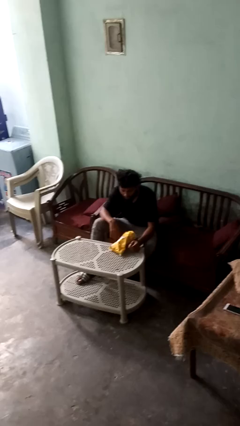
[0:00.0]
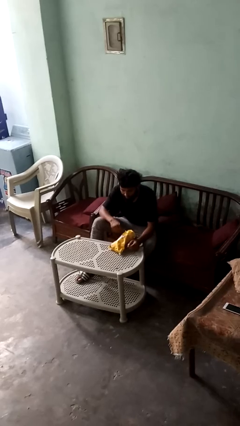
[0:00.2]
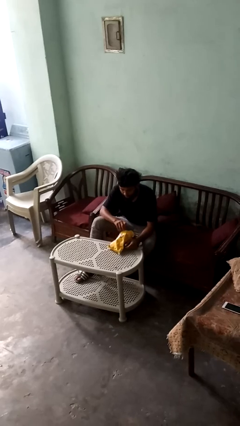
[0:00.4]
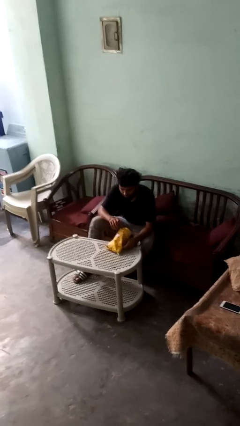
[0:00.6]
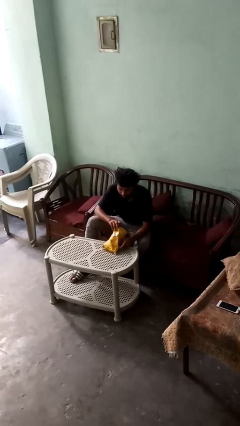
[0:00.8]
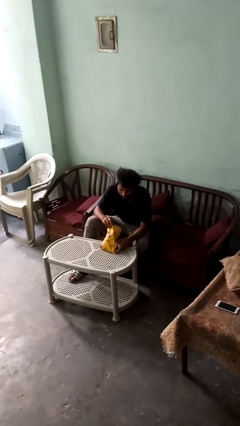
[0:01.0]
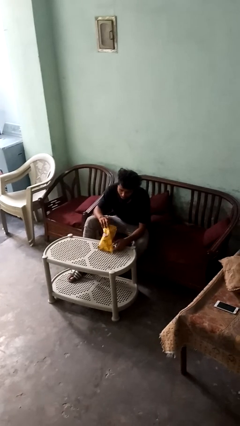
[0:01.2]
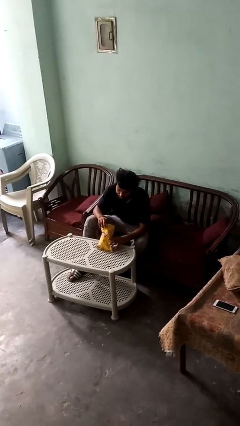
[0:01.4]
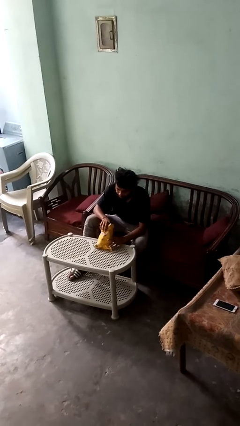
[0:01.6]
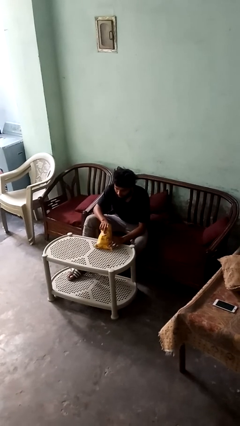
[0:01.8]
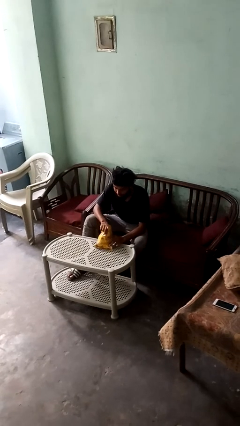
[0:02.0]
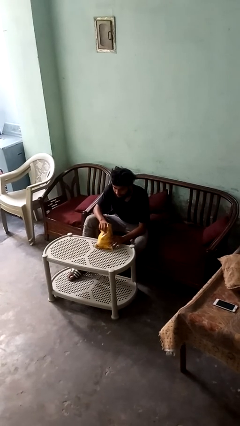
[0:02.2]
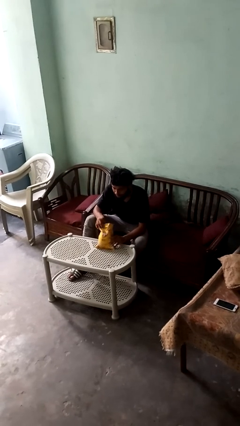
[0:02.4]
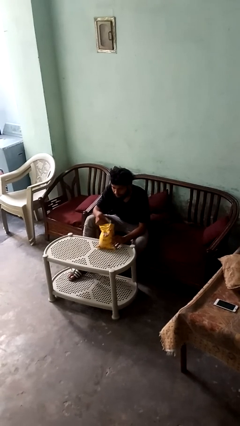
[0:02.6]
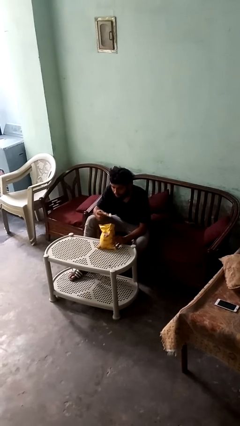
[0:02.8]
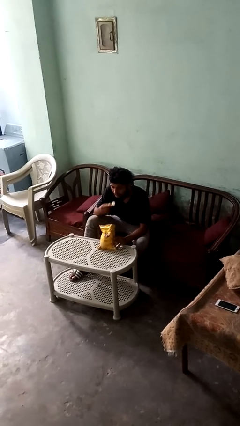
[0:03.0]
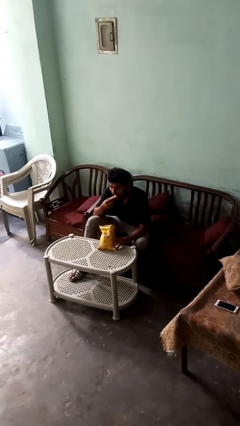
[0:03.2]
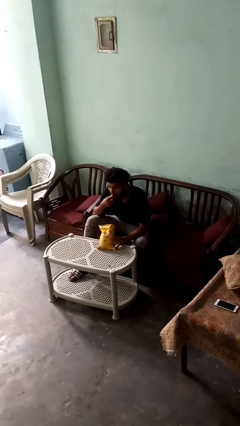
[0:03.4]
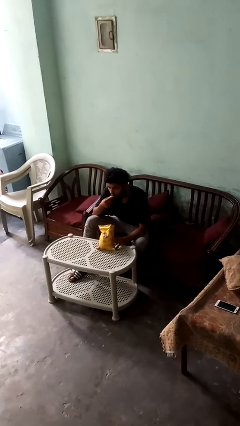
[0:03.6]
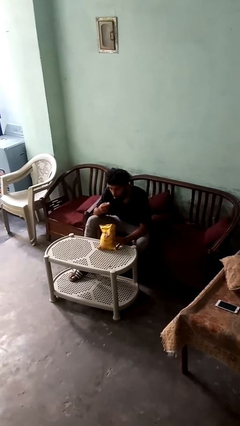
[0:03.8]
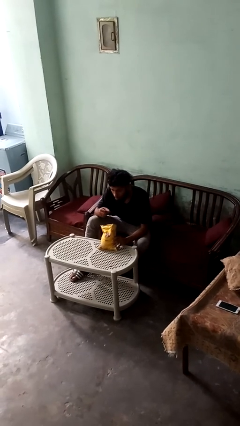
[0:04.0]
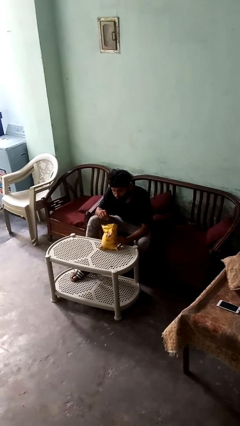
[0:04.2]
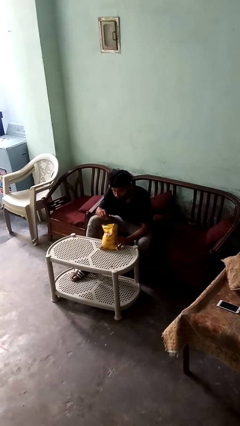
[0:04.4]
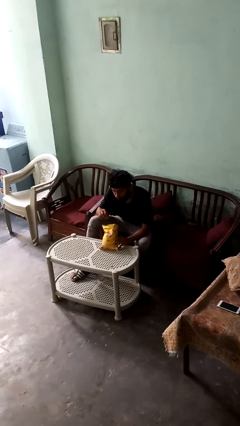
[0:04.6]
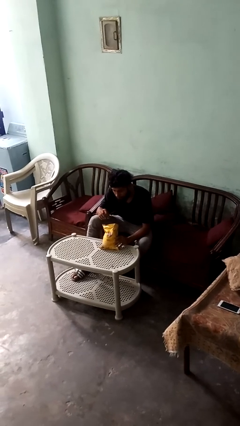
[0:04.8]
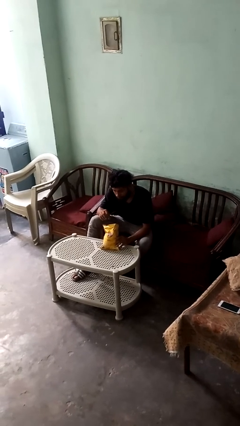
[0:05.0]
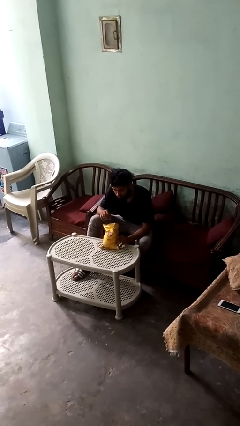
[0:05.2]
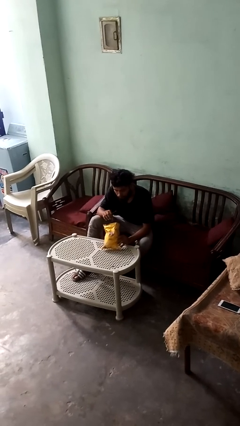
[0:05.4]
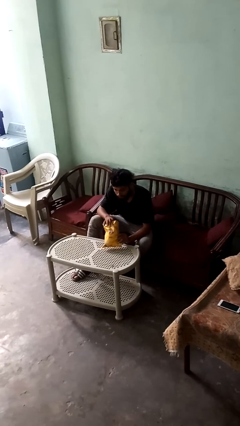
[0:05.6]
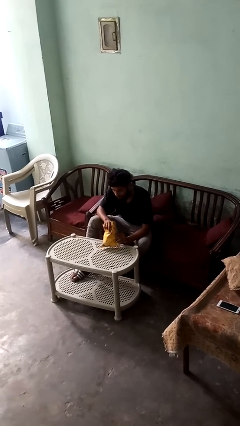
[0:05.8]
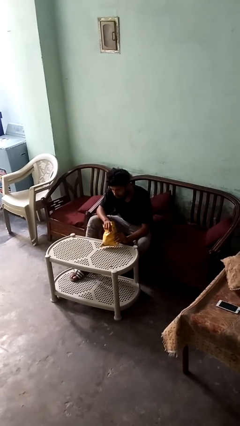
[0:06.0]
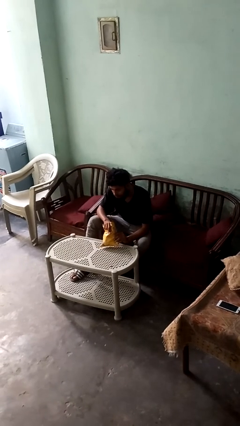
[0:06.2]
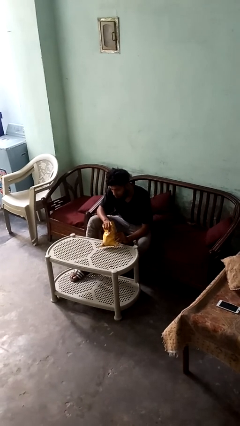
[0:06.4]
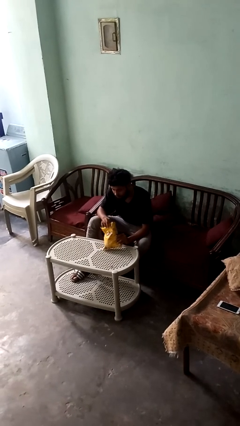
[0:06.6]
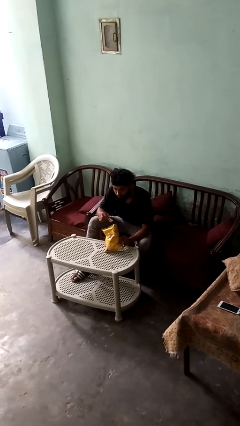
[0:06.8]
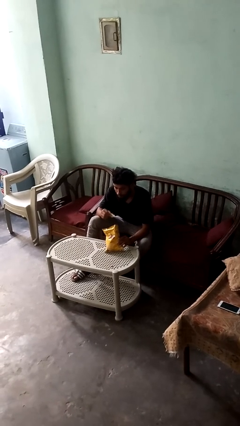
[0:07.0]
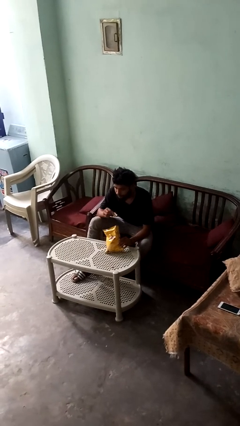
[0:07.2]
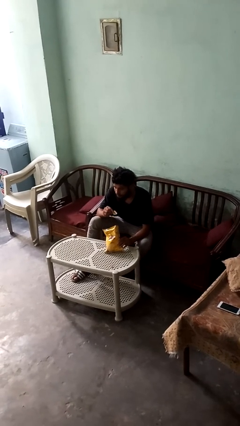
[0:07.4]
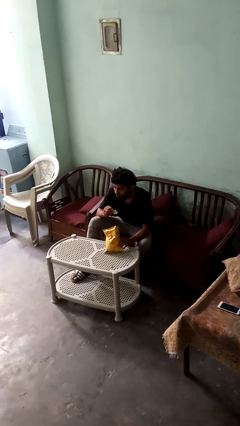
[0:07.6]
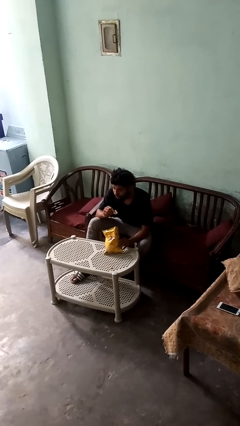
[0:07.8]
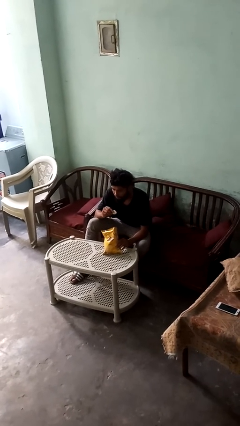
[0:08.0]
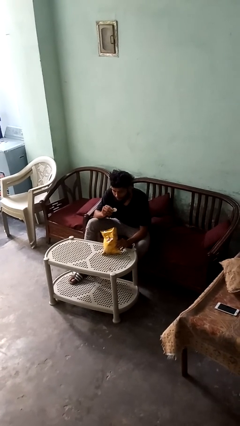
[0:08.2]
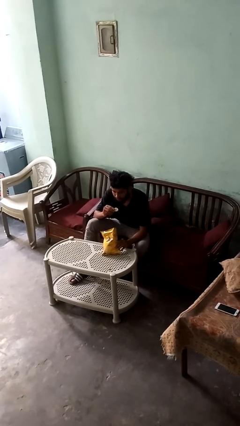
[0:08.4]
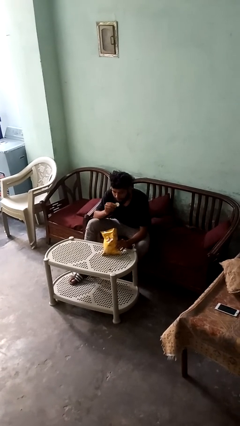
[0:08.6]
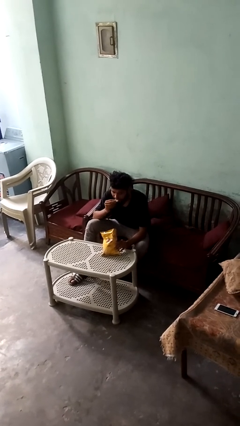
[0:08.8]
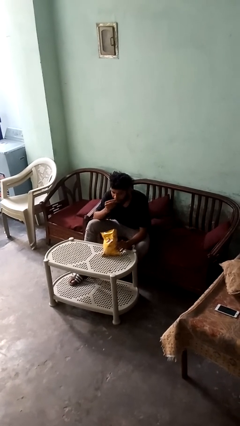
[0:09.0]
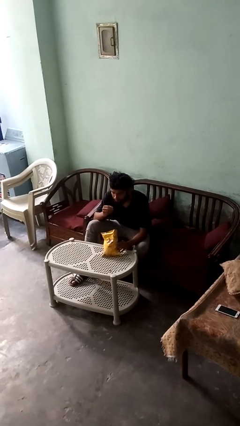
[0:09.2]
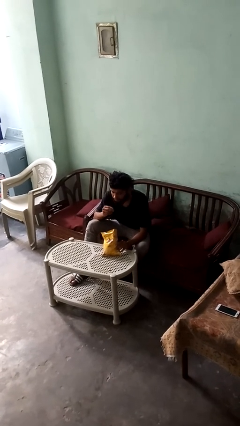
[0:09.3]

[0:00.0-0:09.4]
person eats snack from bag

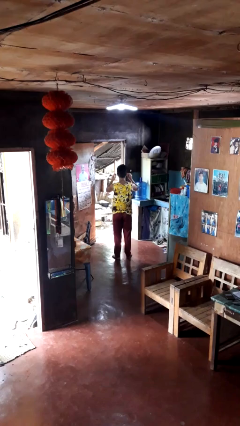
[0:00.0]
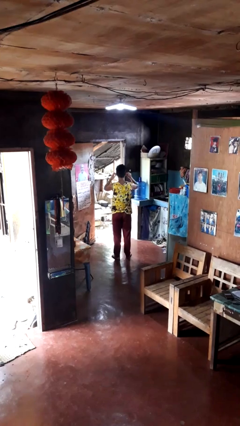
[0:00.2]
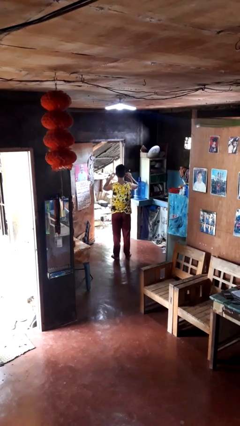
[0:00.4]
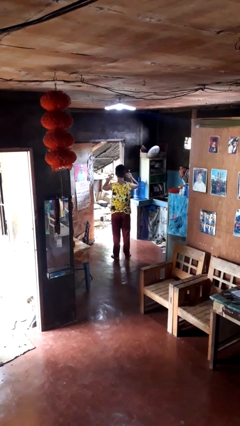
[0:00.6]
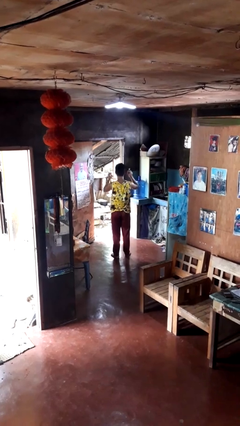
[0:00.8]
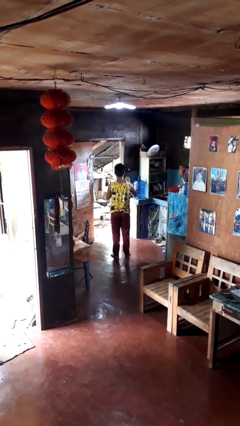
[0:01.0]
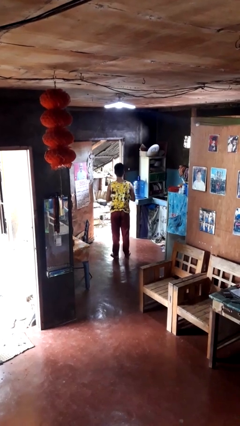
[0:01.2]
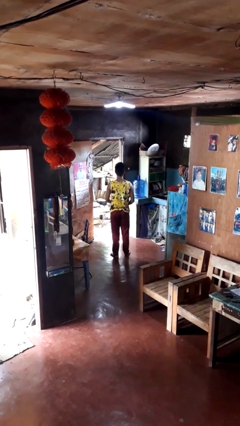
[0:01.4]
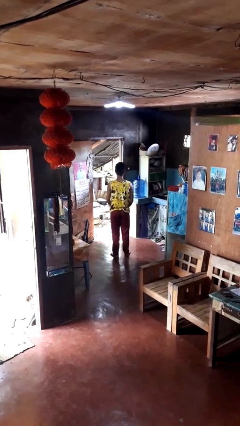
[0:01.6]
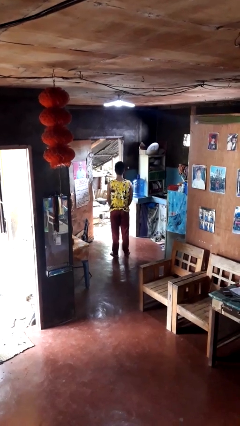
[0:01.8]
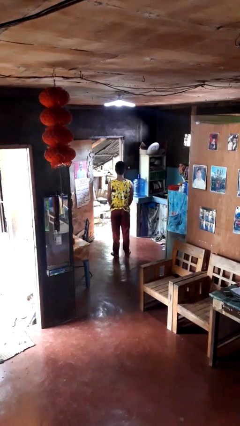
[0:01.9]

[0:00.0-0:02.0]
person takes off headphones

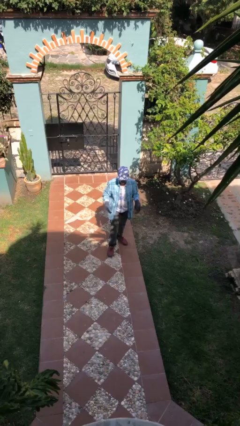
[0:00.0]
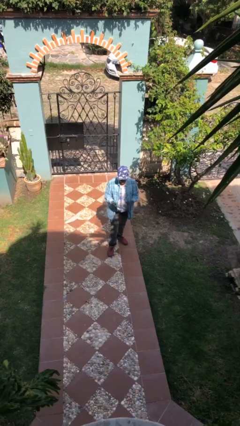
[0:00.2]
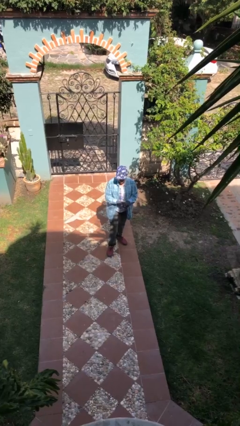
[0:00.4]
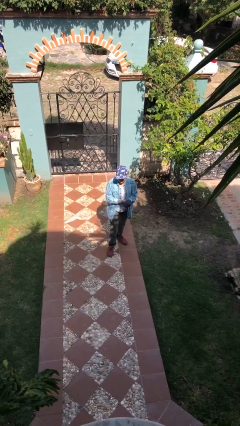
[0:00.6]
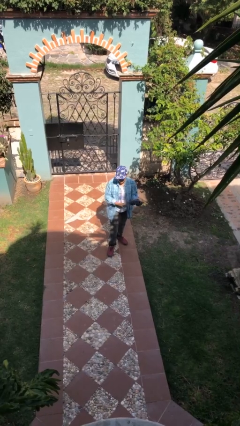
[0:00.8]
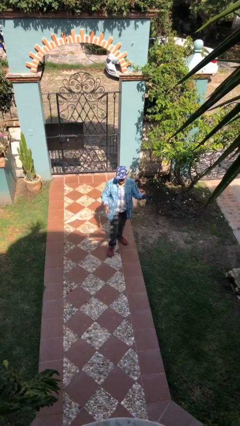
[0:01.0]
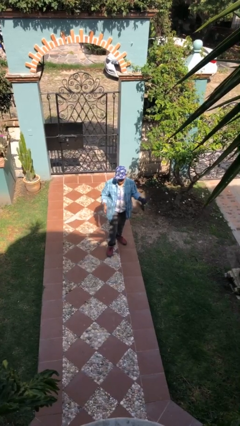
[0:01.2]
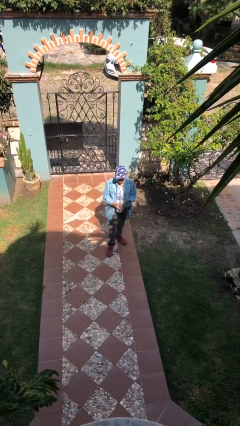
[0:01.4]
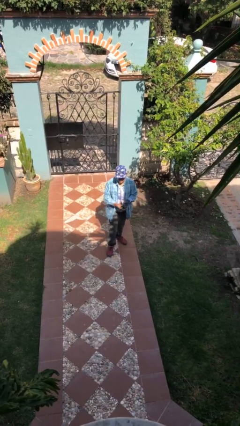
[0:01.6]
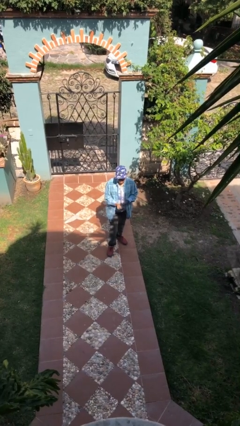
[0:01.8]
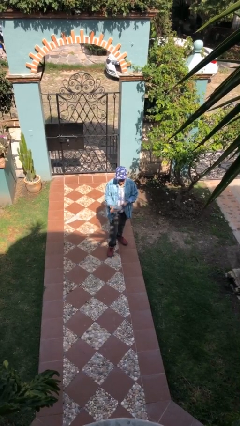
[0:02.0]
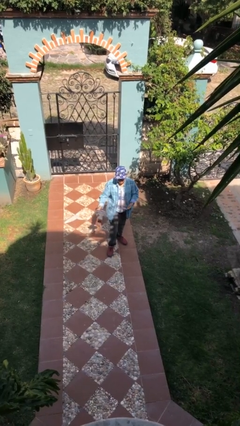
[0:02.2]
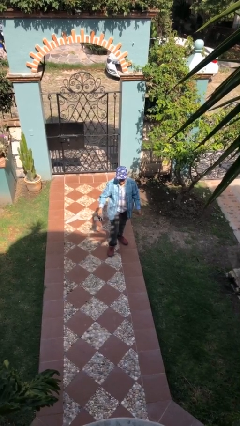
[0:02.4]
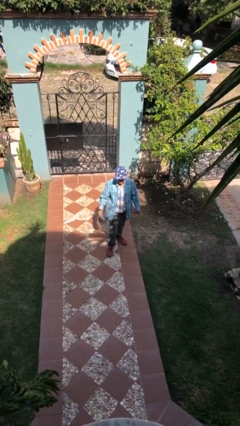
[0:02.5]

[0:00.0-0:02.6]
person takes off gloves

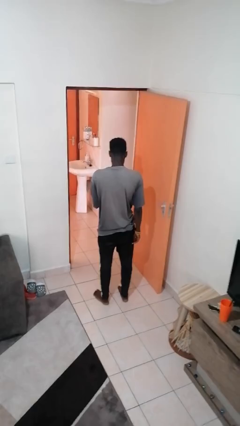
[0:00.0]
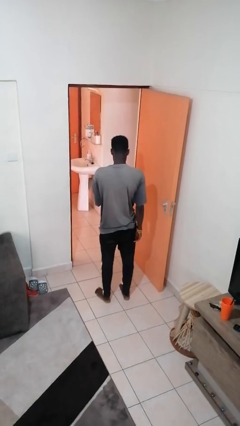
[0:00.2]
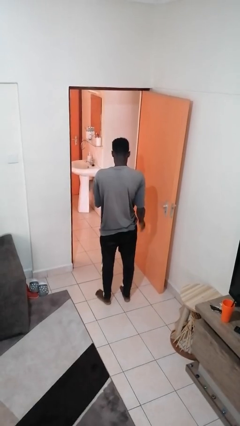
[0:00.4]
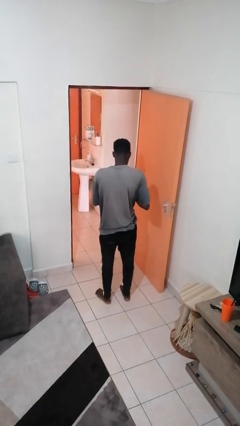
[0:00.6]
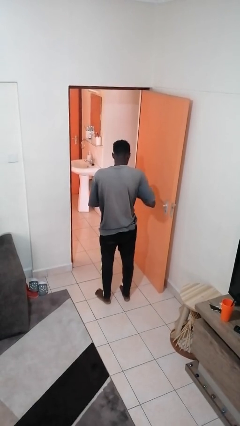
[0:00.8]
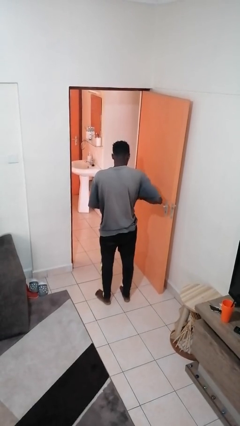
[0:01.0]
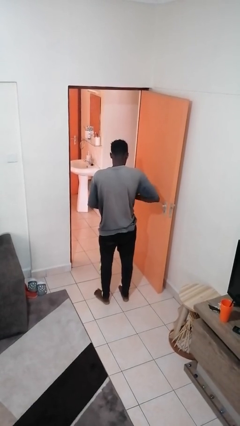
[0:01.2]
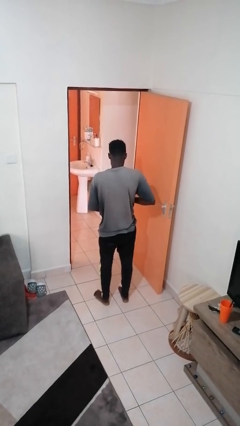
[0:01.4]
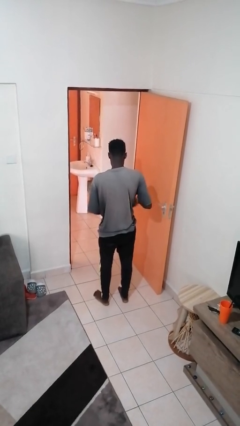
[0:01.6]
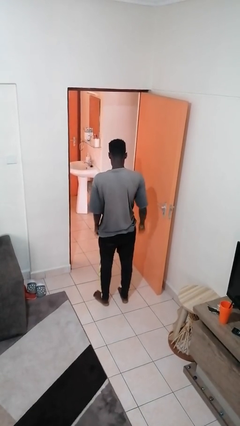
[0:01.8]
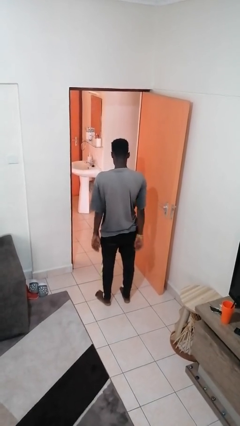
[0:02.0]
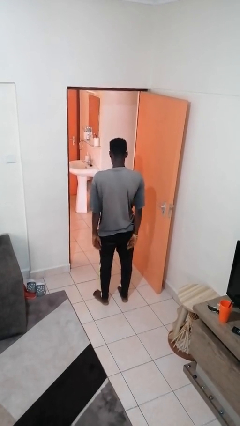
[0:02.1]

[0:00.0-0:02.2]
person puts phone into pocket

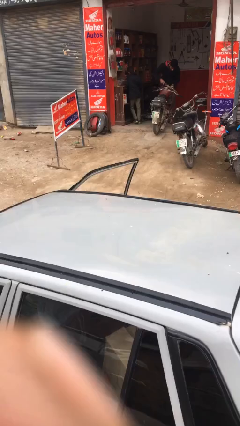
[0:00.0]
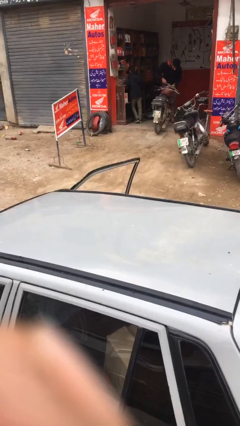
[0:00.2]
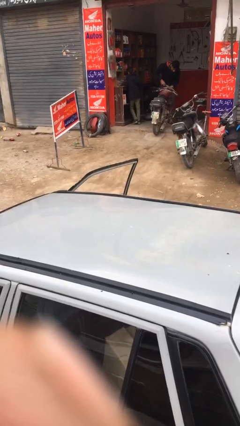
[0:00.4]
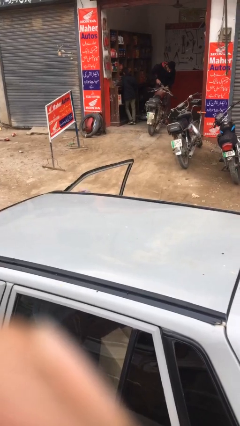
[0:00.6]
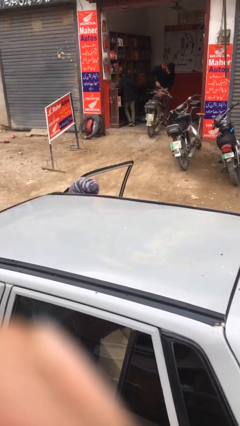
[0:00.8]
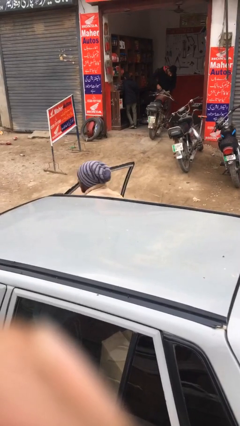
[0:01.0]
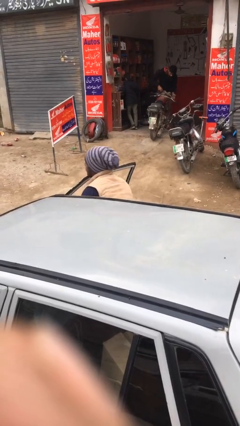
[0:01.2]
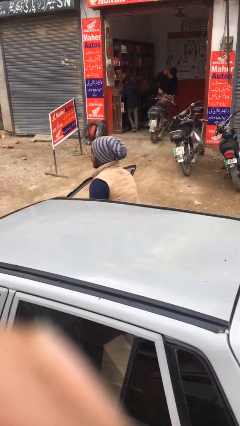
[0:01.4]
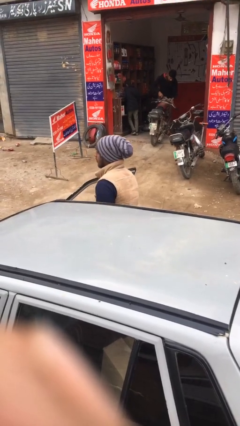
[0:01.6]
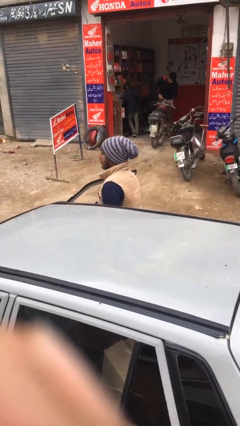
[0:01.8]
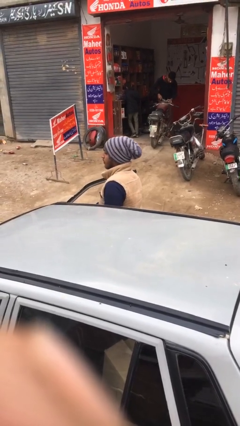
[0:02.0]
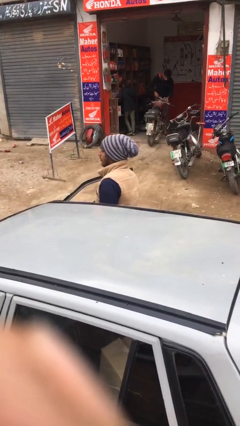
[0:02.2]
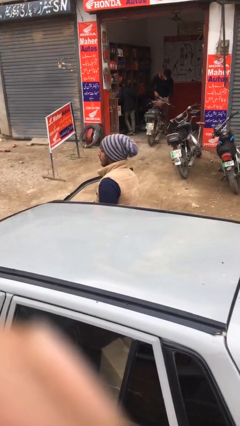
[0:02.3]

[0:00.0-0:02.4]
person exits car
